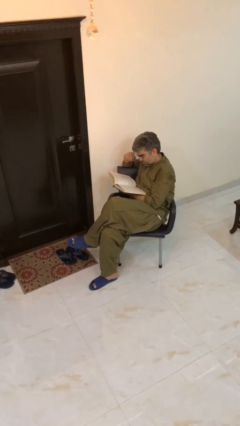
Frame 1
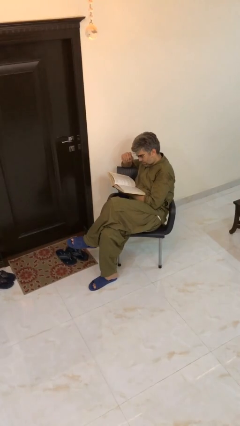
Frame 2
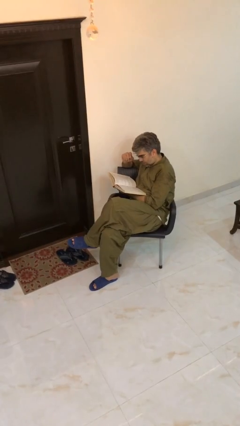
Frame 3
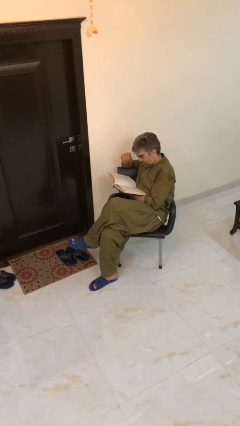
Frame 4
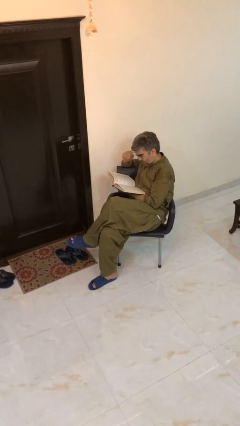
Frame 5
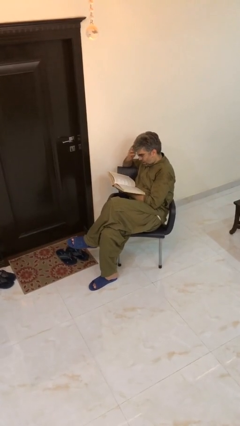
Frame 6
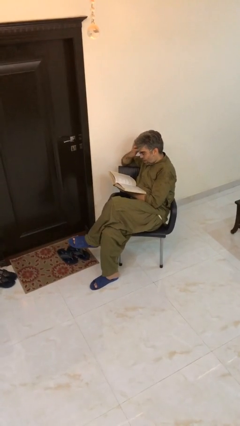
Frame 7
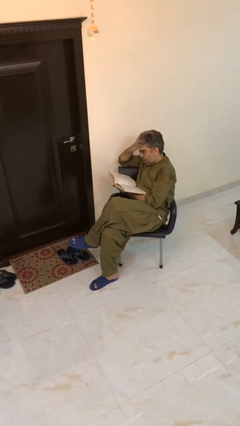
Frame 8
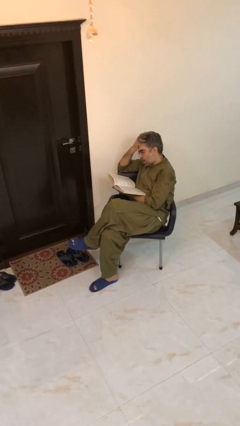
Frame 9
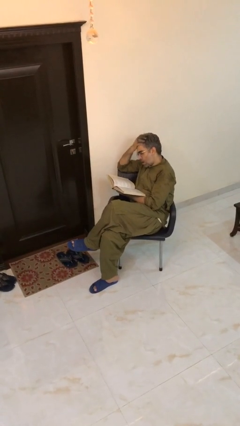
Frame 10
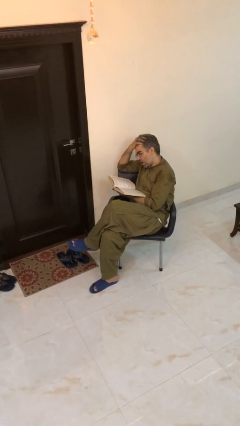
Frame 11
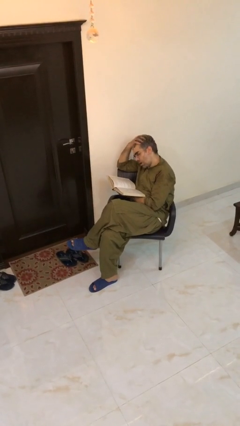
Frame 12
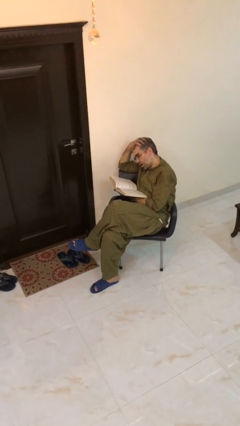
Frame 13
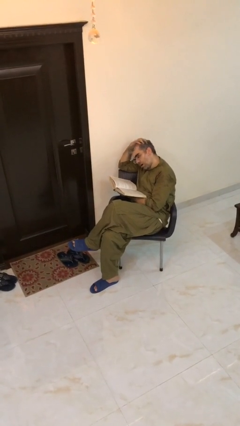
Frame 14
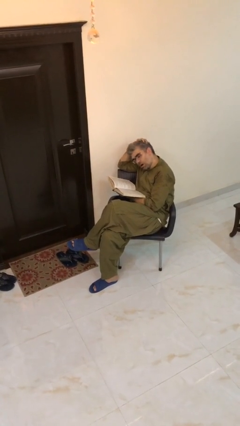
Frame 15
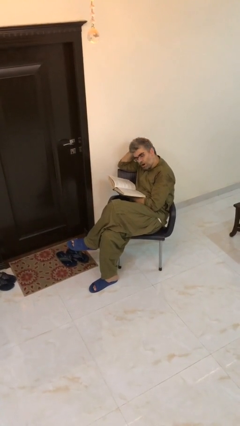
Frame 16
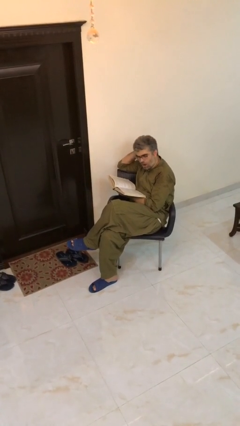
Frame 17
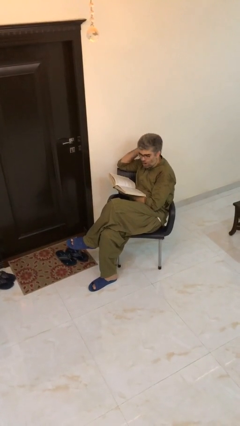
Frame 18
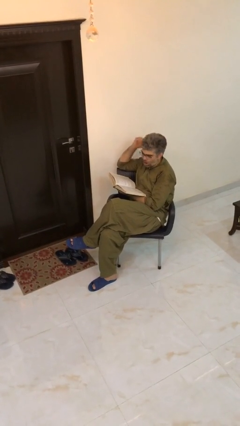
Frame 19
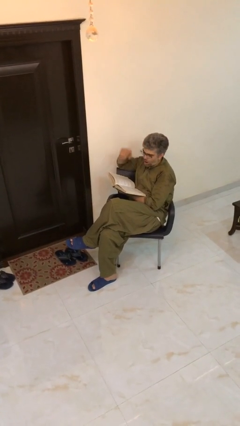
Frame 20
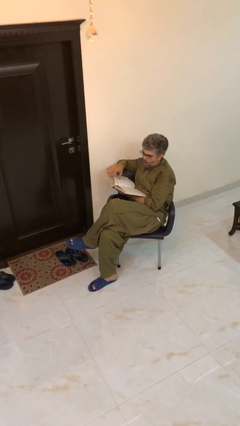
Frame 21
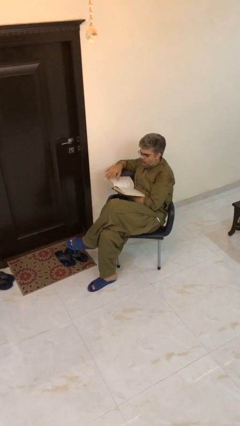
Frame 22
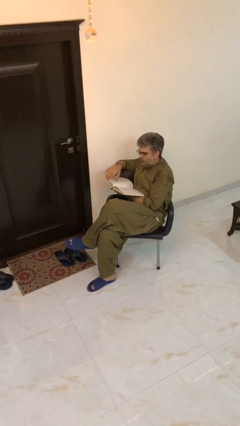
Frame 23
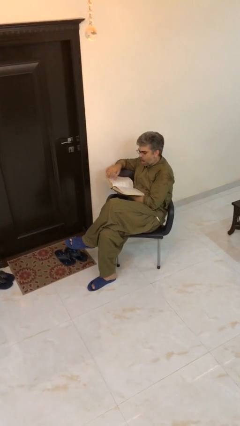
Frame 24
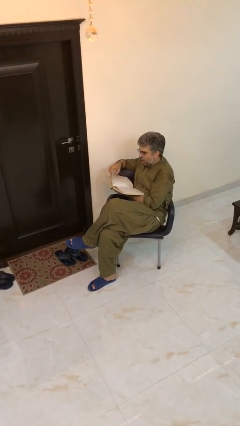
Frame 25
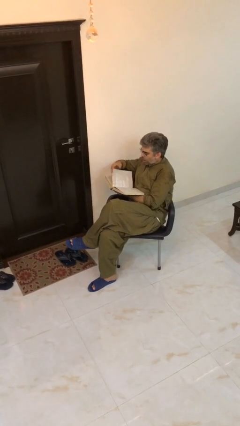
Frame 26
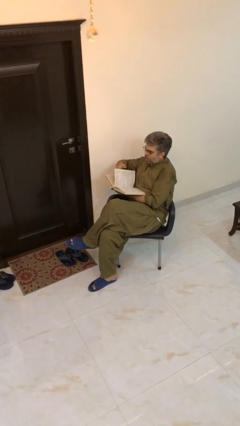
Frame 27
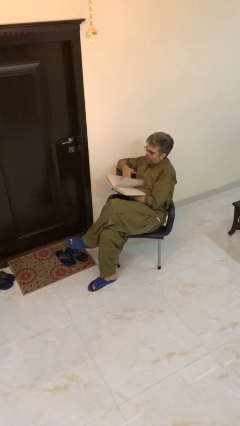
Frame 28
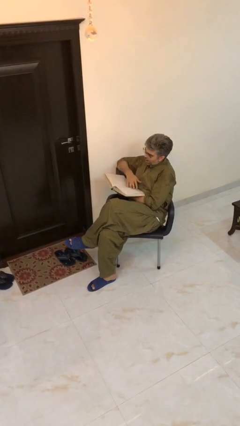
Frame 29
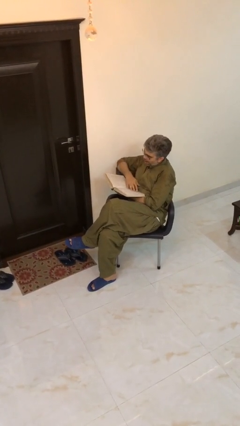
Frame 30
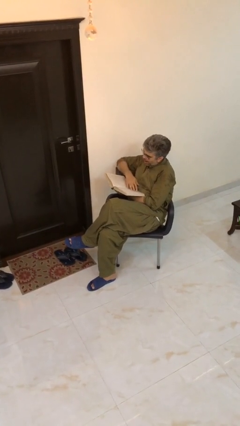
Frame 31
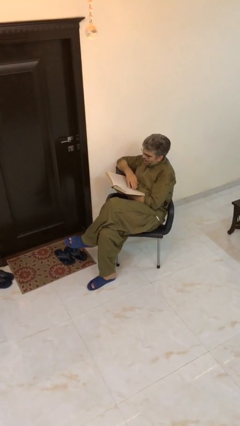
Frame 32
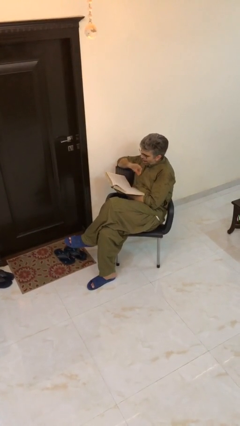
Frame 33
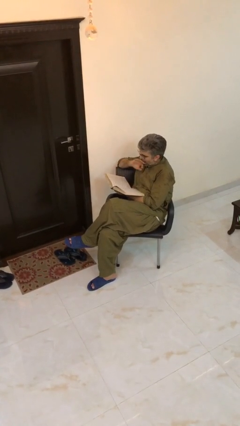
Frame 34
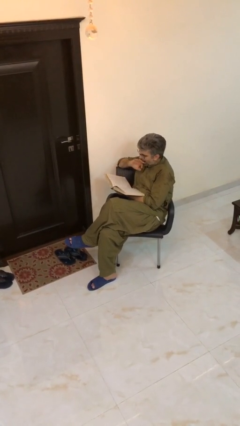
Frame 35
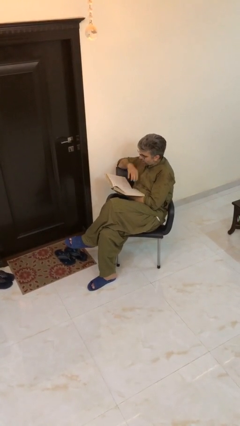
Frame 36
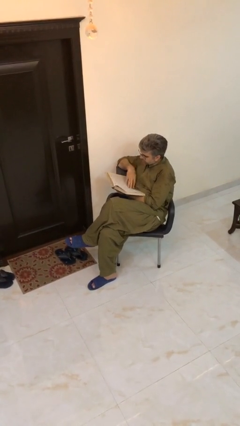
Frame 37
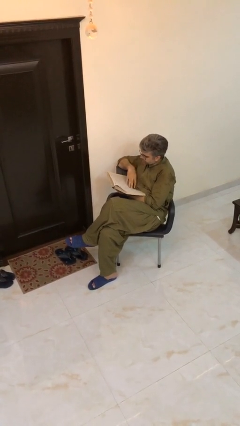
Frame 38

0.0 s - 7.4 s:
person reads document

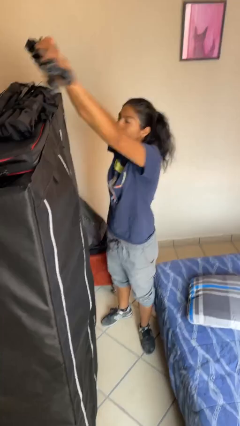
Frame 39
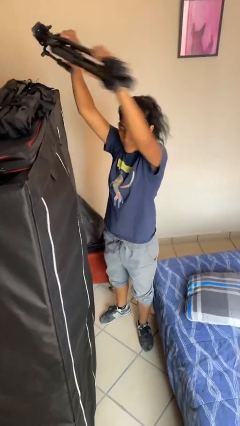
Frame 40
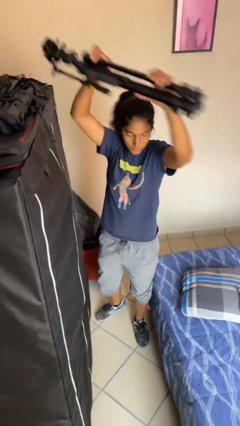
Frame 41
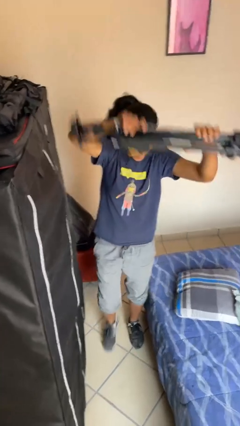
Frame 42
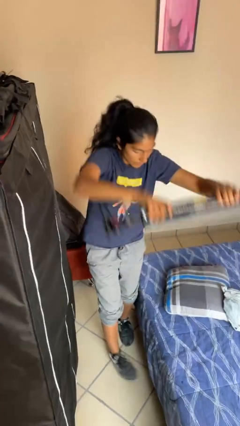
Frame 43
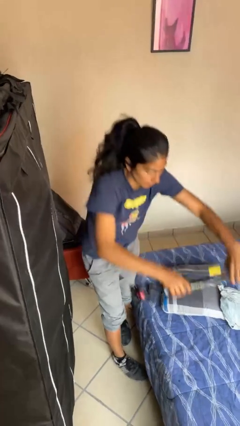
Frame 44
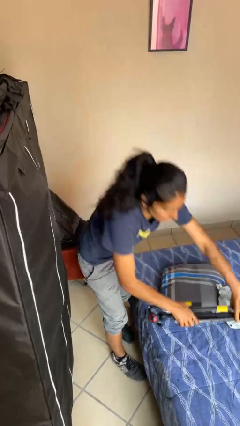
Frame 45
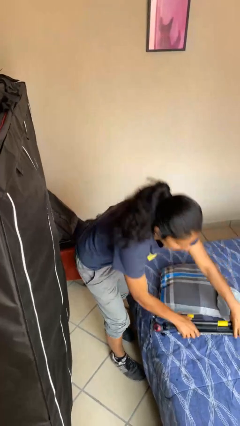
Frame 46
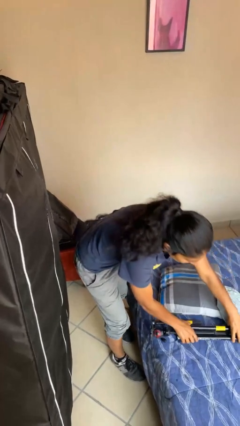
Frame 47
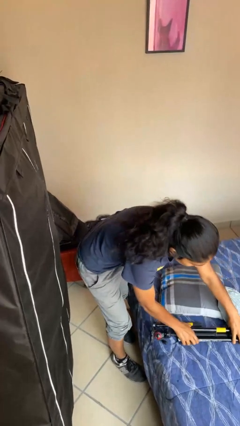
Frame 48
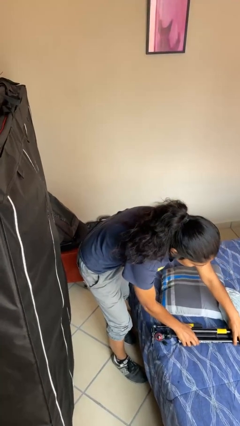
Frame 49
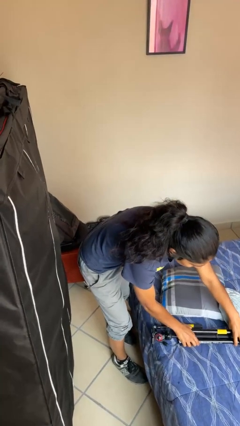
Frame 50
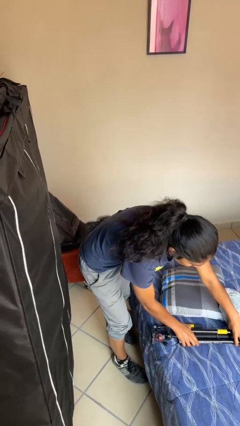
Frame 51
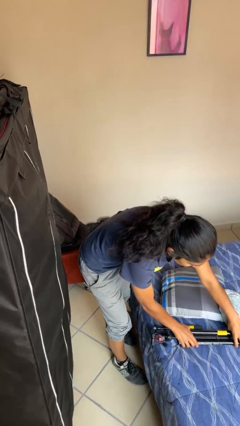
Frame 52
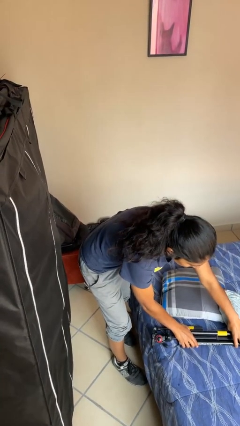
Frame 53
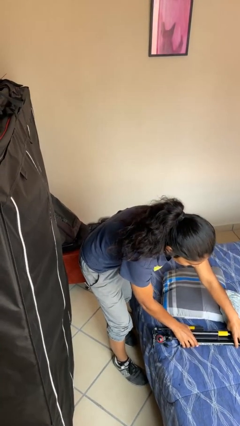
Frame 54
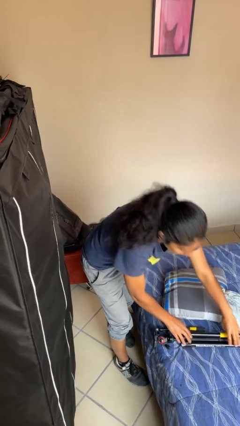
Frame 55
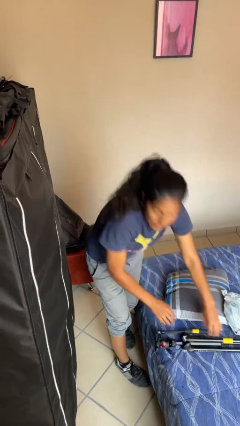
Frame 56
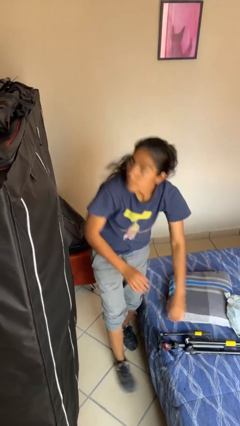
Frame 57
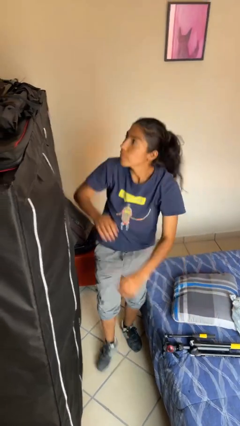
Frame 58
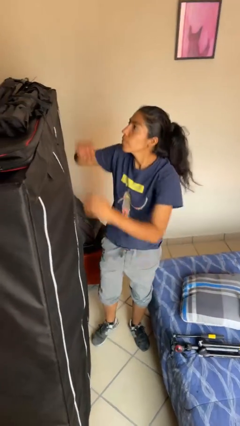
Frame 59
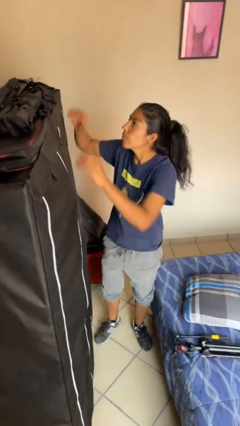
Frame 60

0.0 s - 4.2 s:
person puts down object on shelf

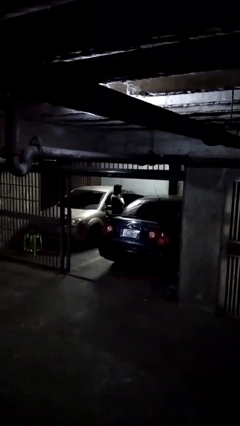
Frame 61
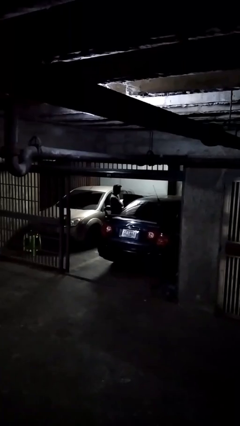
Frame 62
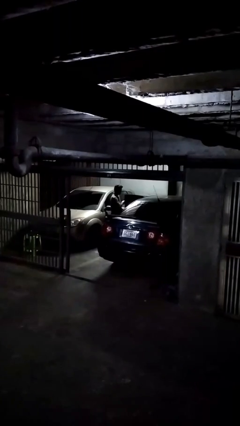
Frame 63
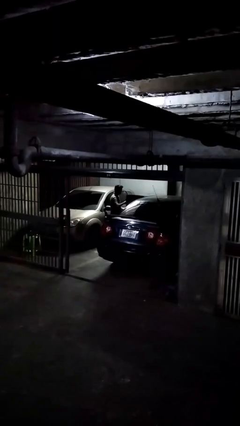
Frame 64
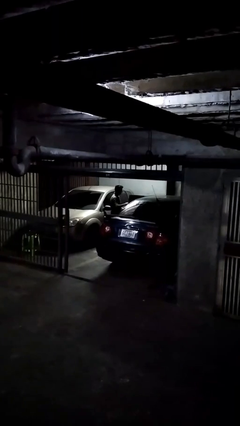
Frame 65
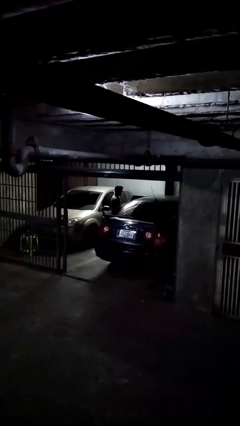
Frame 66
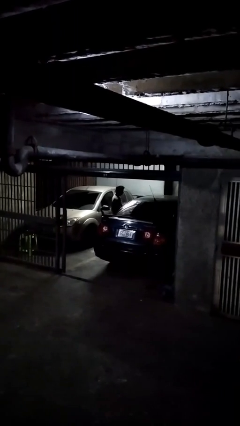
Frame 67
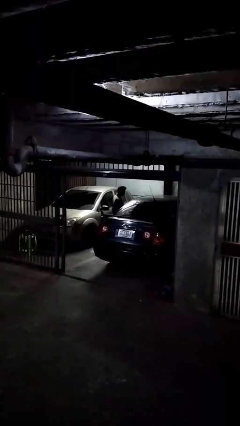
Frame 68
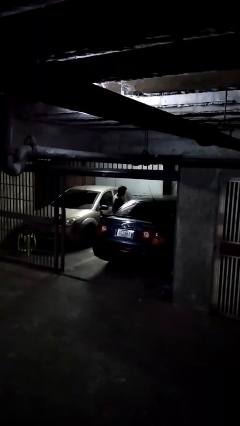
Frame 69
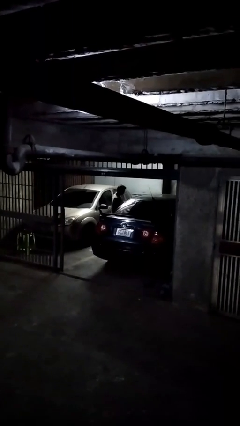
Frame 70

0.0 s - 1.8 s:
person closes car door

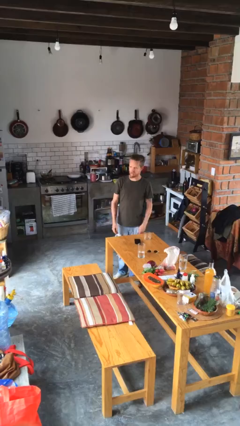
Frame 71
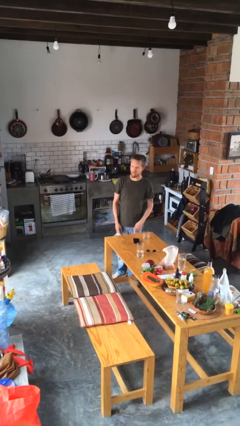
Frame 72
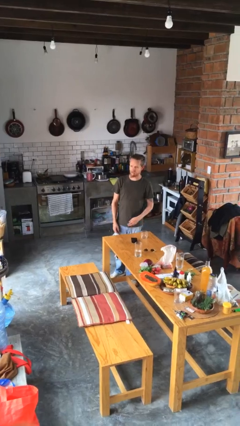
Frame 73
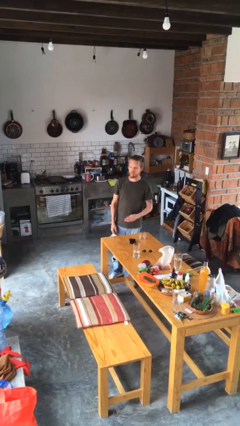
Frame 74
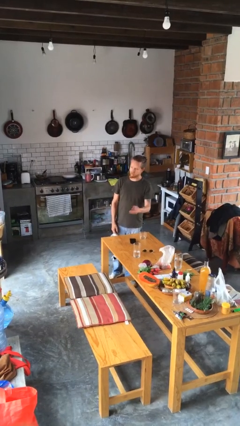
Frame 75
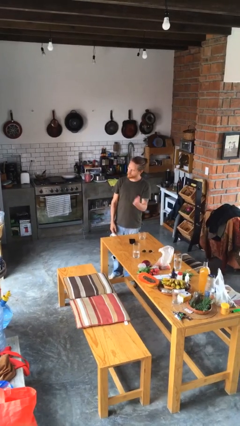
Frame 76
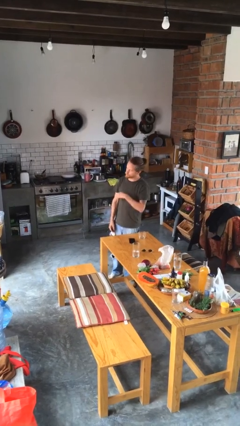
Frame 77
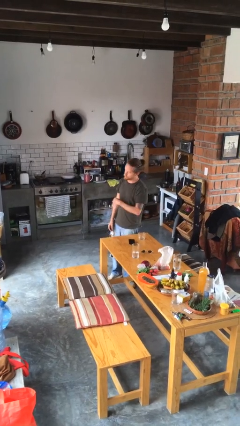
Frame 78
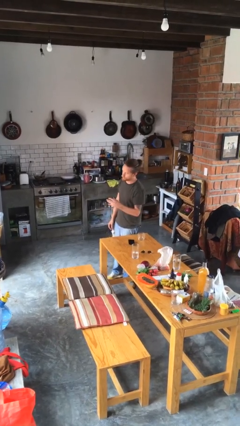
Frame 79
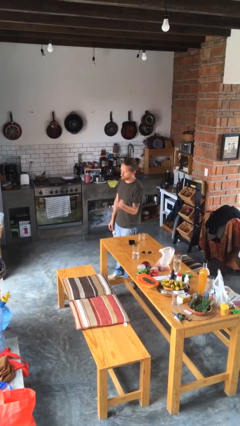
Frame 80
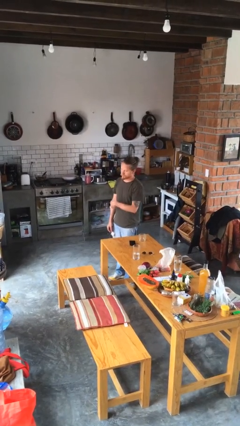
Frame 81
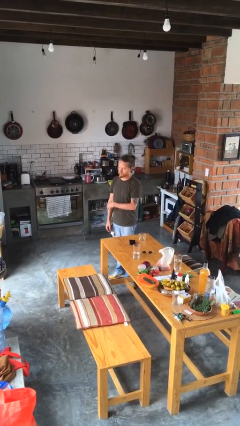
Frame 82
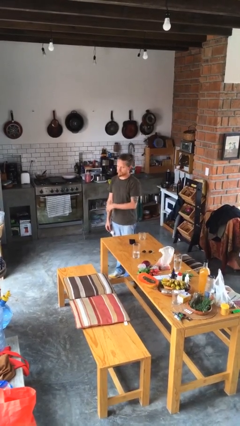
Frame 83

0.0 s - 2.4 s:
person gestures come here

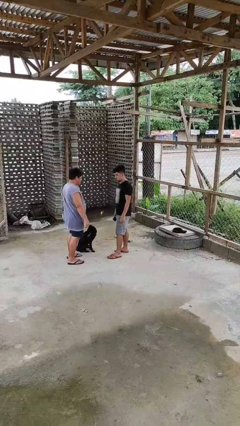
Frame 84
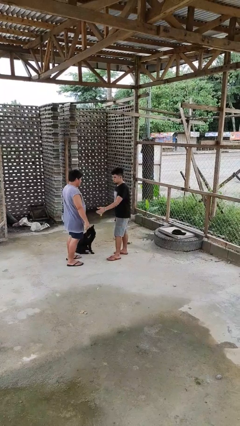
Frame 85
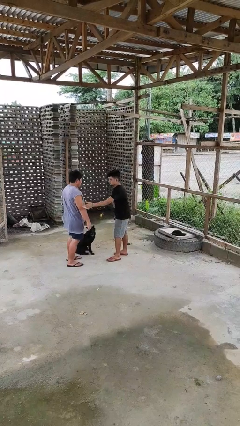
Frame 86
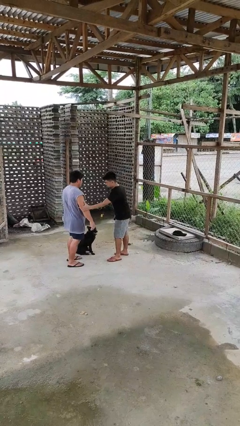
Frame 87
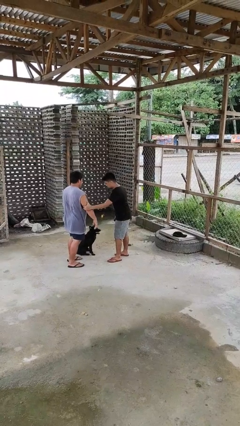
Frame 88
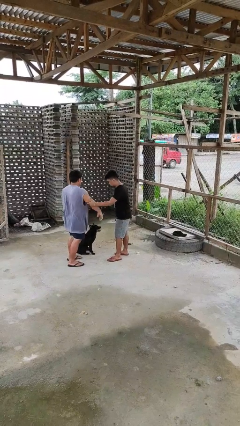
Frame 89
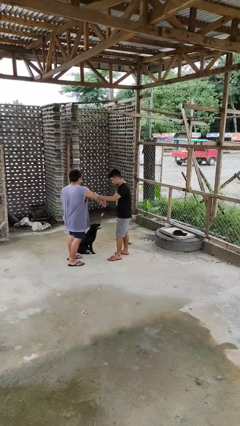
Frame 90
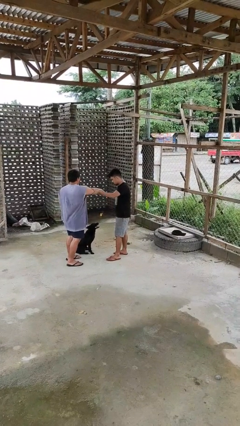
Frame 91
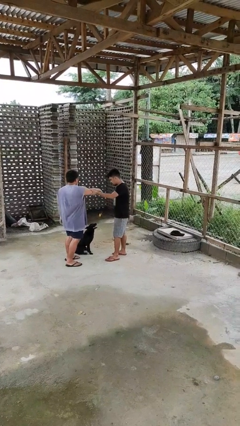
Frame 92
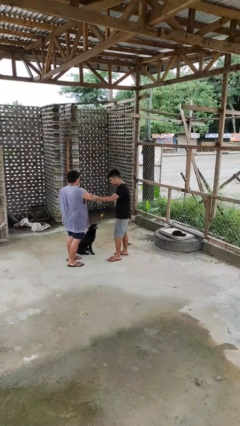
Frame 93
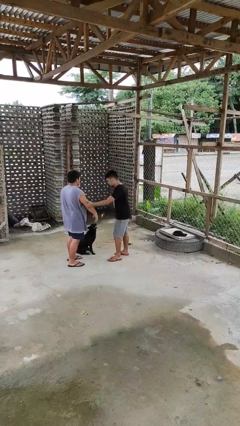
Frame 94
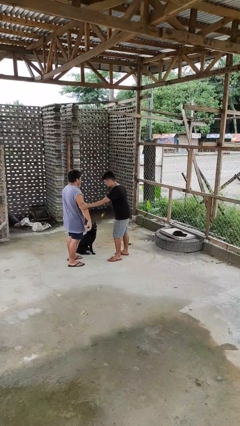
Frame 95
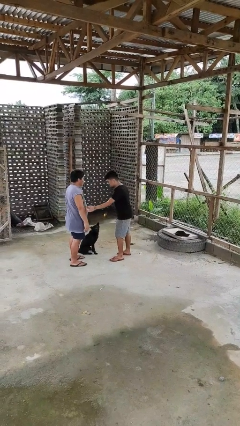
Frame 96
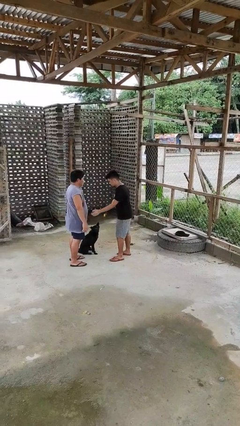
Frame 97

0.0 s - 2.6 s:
person grabs person by bicep
